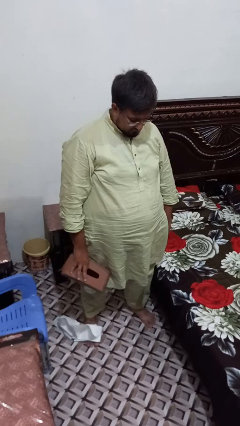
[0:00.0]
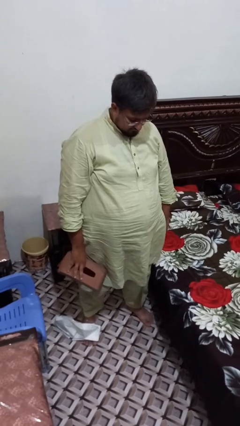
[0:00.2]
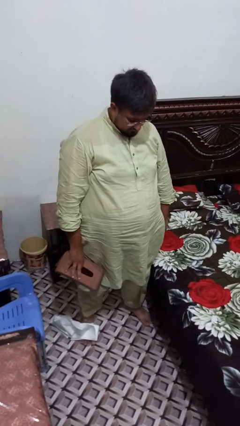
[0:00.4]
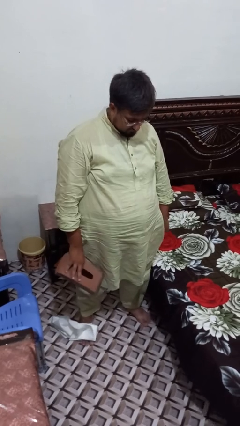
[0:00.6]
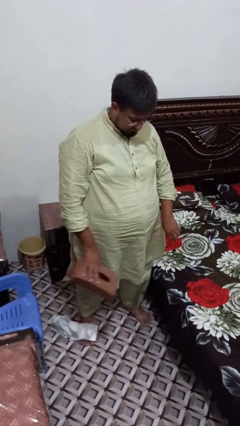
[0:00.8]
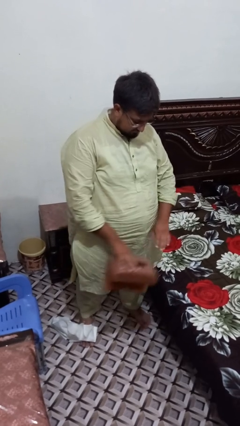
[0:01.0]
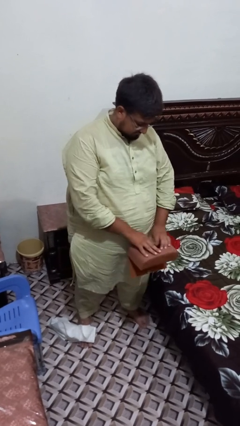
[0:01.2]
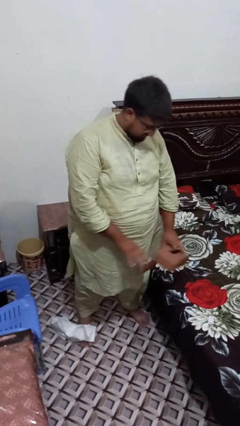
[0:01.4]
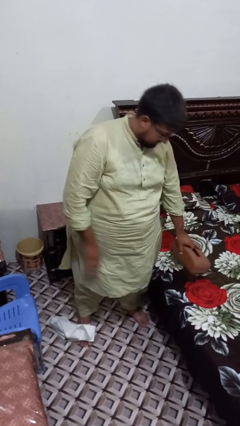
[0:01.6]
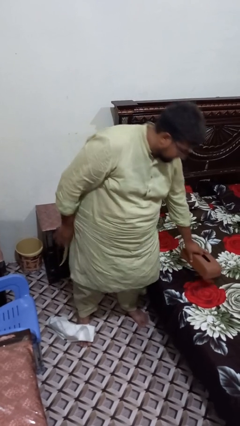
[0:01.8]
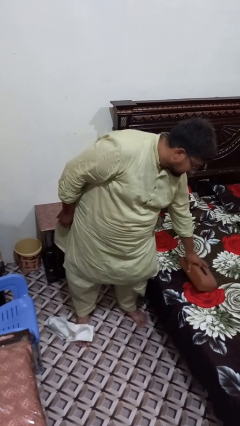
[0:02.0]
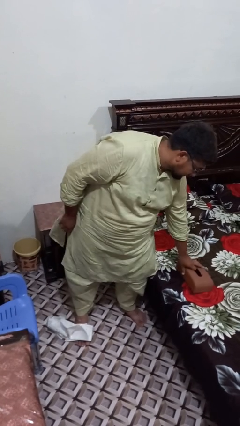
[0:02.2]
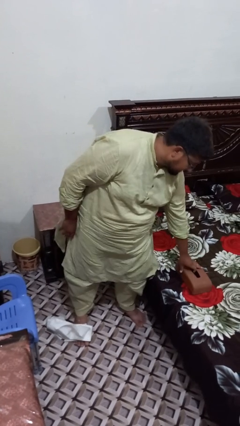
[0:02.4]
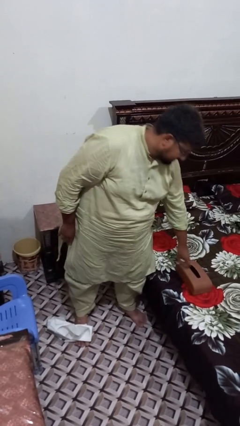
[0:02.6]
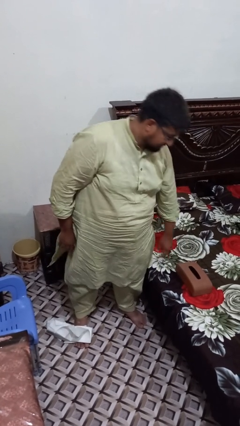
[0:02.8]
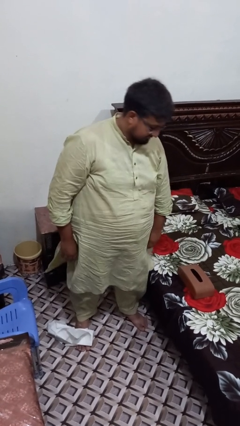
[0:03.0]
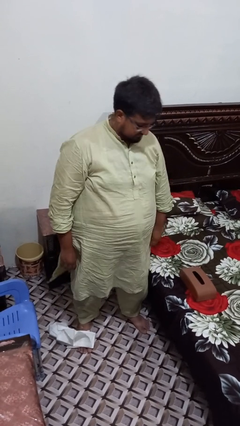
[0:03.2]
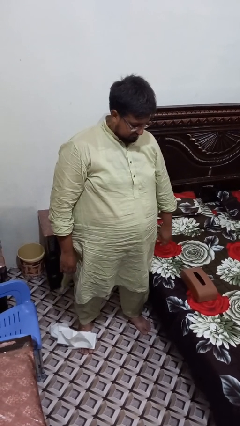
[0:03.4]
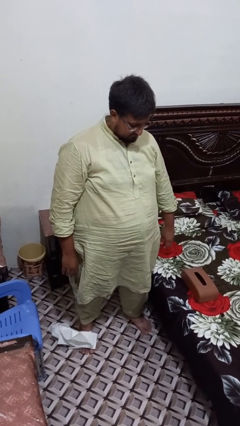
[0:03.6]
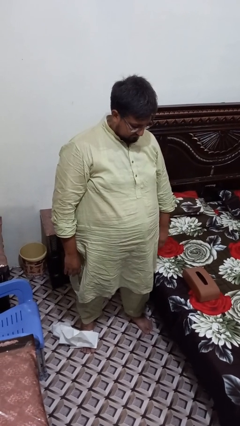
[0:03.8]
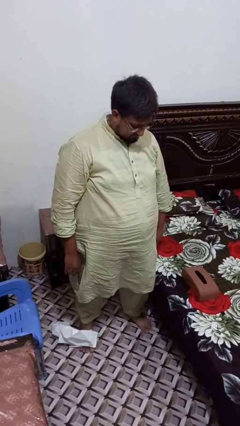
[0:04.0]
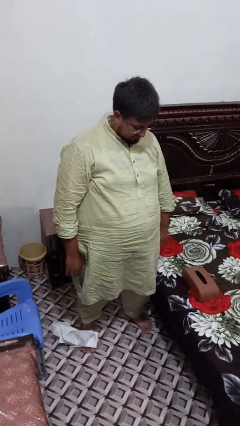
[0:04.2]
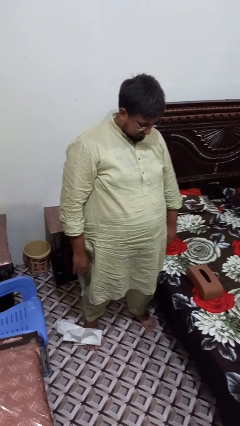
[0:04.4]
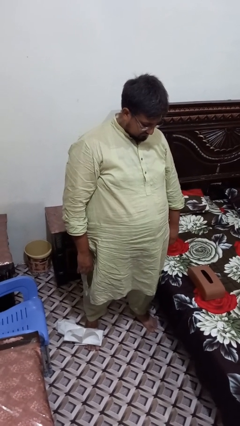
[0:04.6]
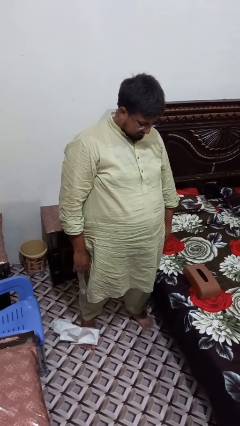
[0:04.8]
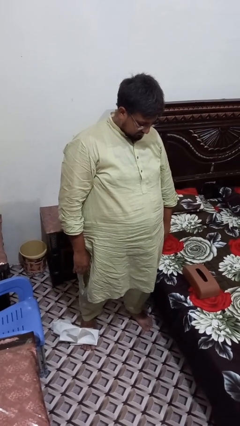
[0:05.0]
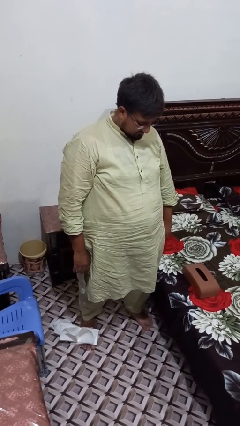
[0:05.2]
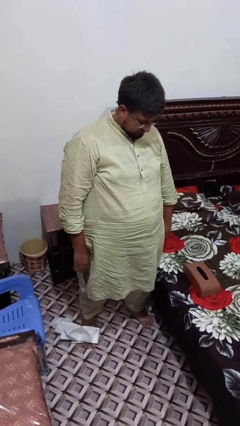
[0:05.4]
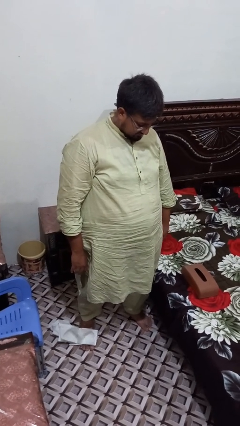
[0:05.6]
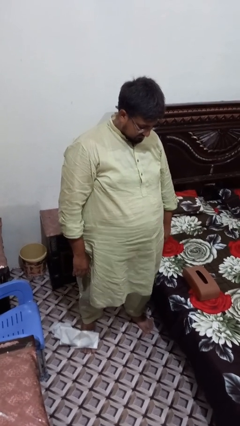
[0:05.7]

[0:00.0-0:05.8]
person puts down object on bed

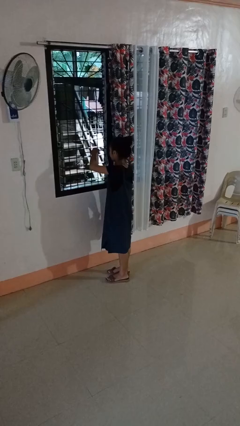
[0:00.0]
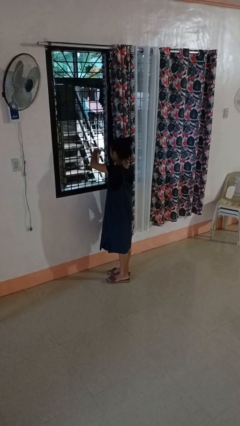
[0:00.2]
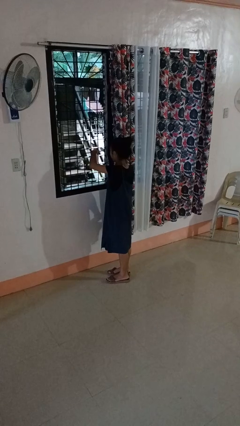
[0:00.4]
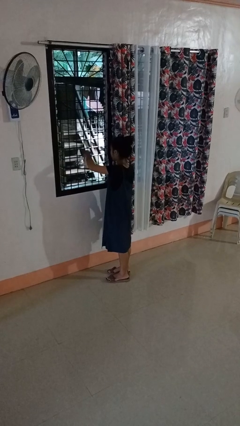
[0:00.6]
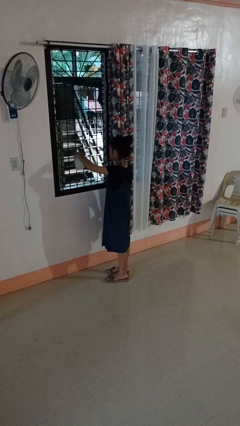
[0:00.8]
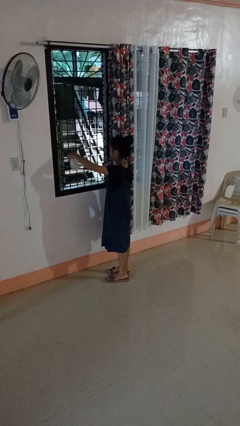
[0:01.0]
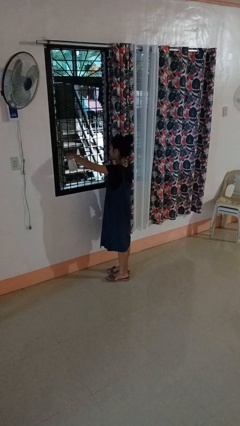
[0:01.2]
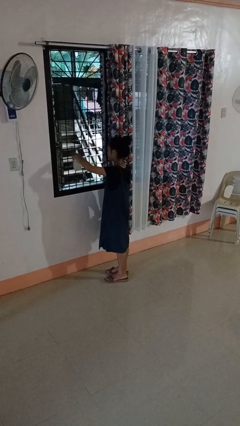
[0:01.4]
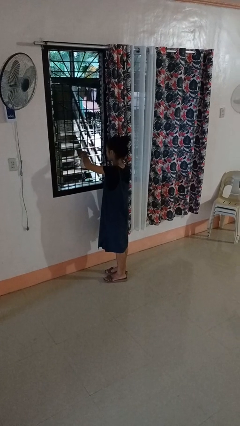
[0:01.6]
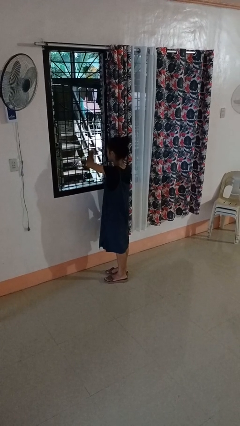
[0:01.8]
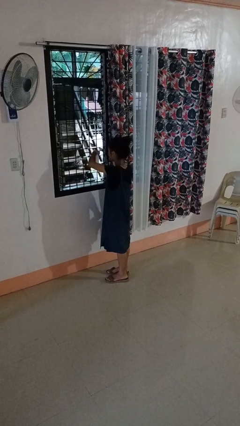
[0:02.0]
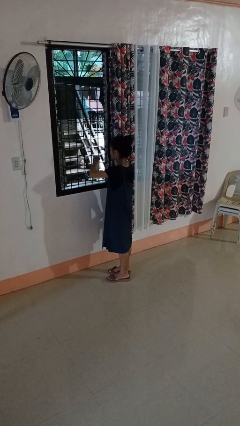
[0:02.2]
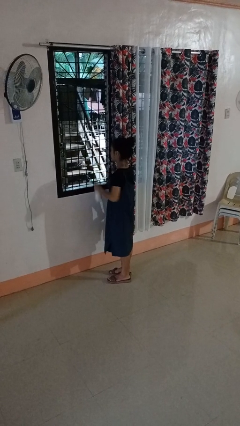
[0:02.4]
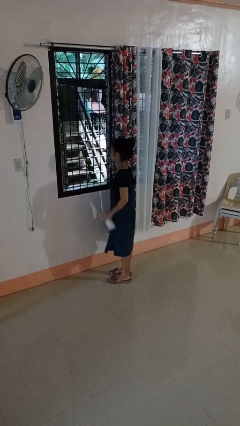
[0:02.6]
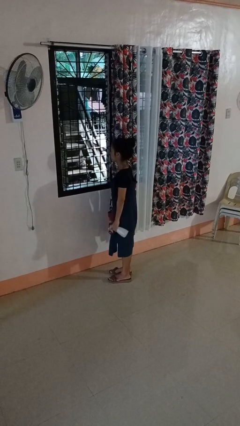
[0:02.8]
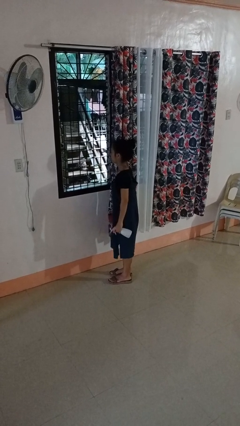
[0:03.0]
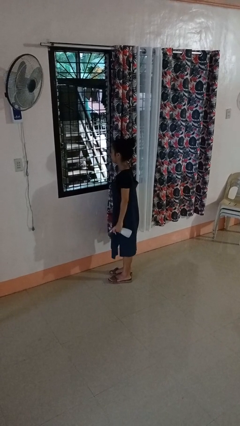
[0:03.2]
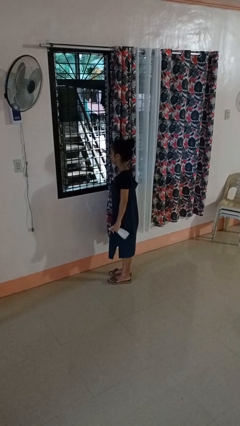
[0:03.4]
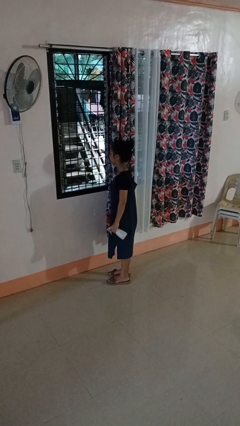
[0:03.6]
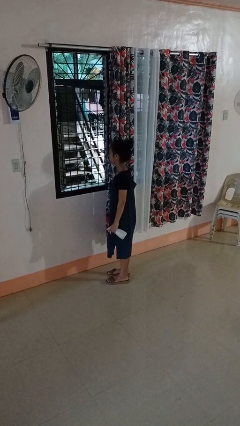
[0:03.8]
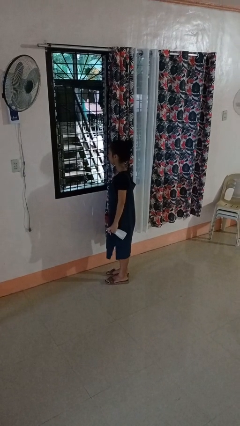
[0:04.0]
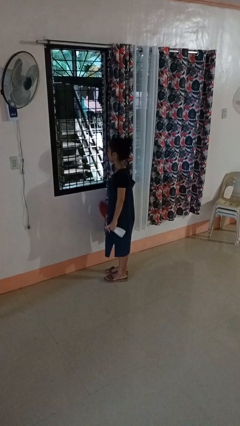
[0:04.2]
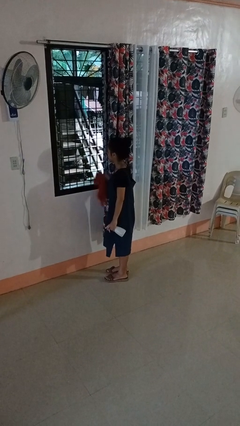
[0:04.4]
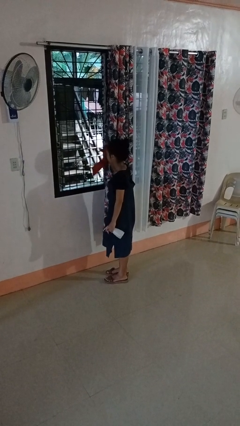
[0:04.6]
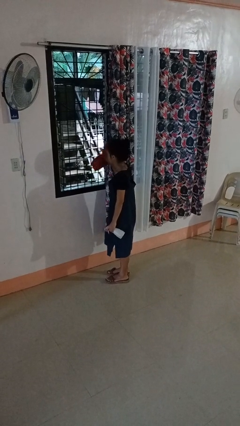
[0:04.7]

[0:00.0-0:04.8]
person sprays from bottle

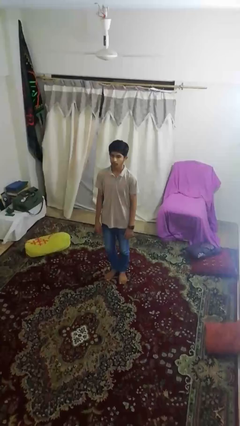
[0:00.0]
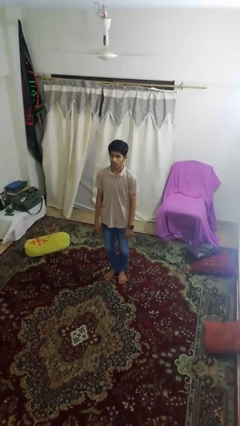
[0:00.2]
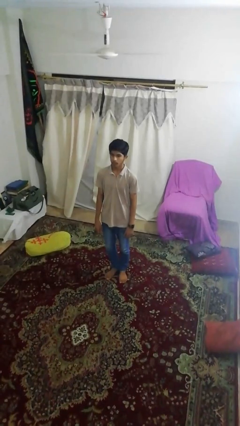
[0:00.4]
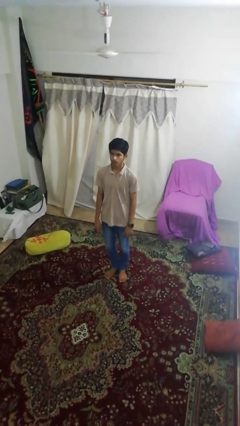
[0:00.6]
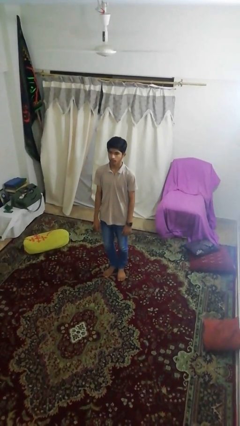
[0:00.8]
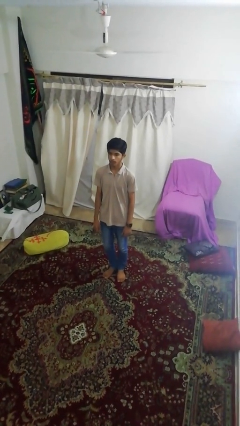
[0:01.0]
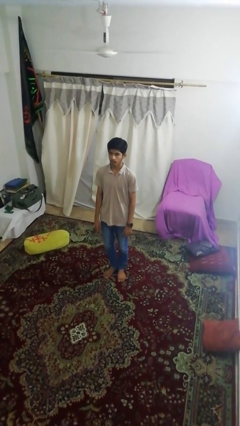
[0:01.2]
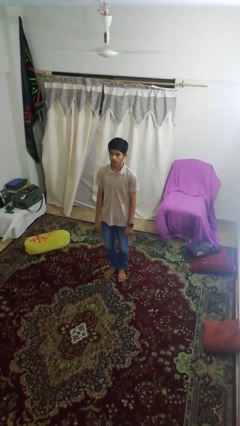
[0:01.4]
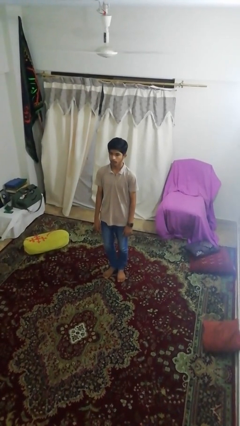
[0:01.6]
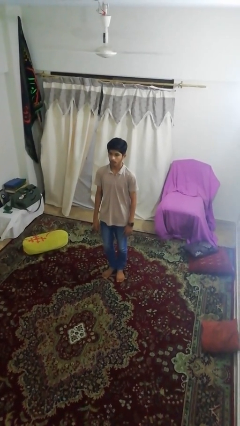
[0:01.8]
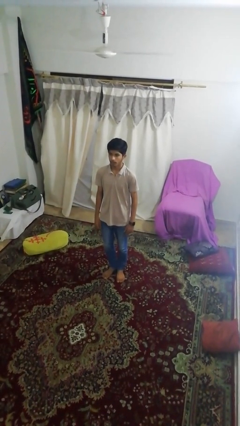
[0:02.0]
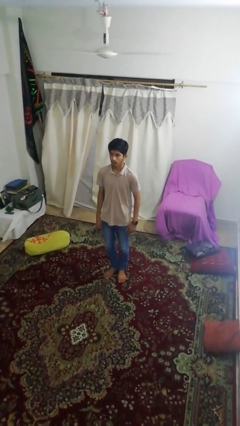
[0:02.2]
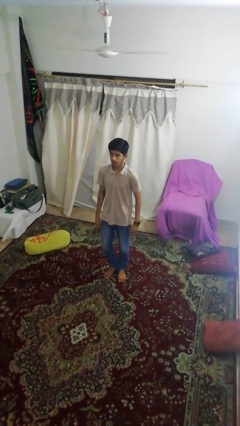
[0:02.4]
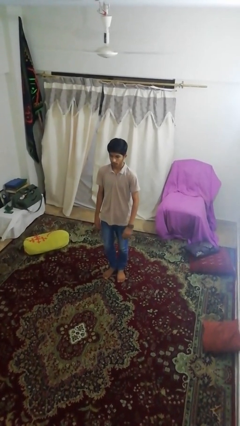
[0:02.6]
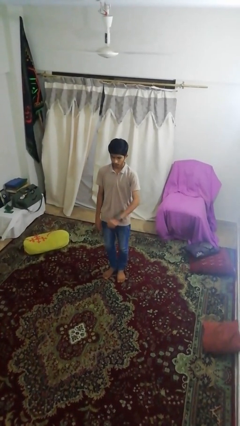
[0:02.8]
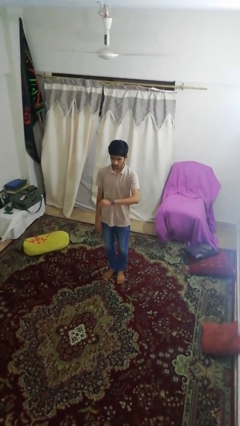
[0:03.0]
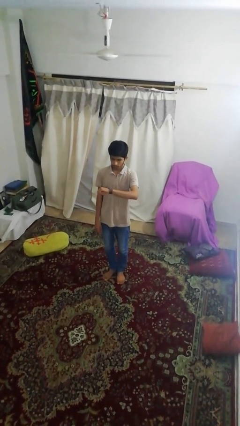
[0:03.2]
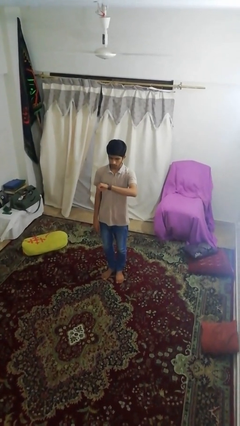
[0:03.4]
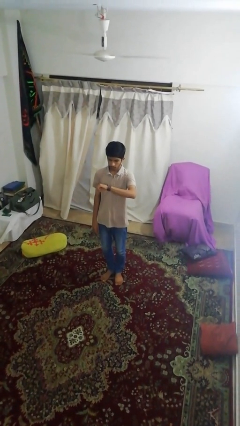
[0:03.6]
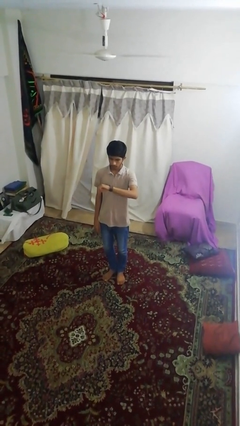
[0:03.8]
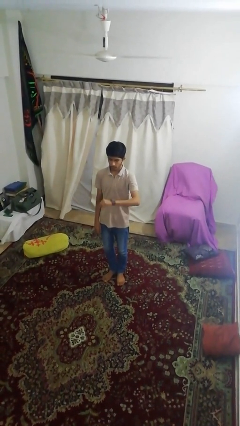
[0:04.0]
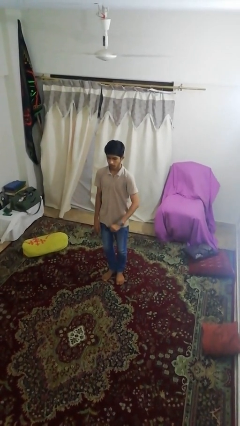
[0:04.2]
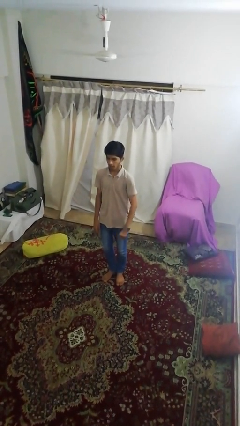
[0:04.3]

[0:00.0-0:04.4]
person looks at wristwatch

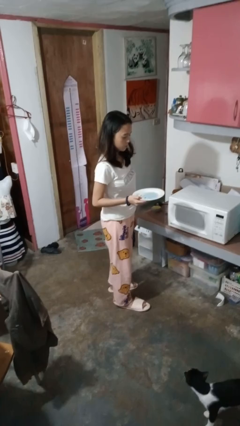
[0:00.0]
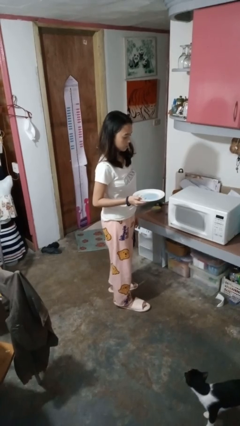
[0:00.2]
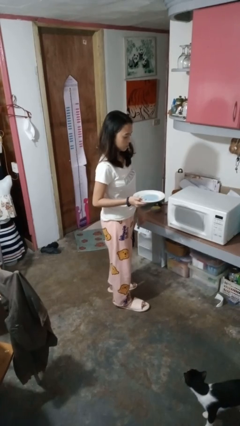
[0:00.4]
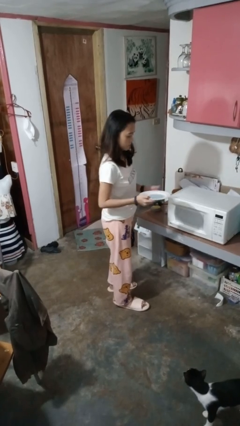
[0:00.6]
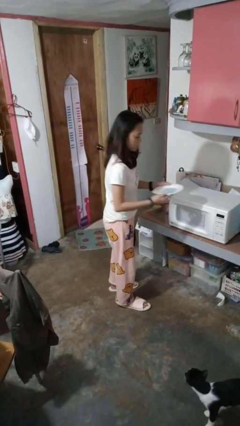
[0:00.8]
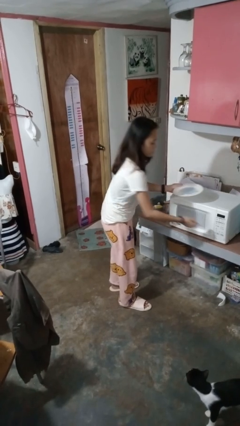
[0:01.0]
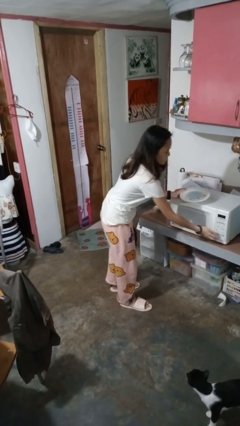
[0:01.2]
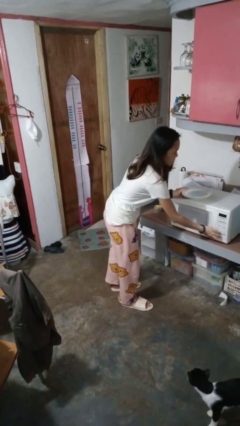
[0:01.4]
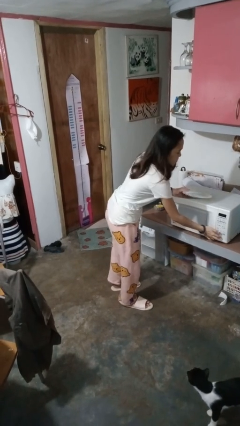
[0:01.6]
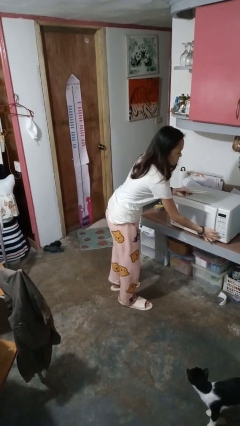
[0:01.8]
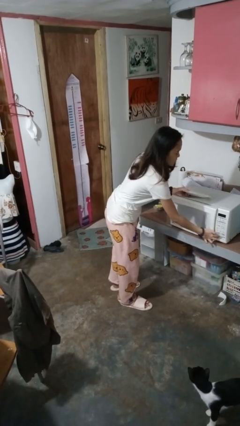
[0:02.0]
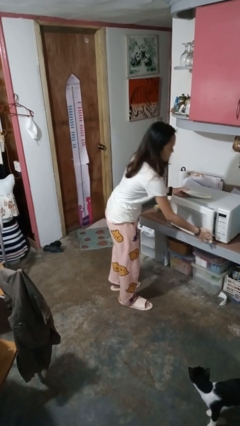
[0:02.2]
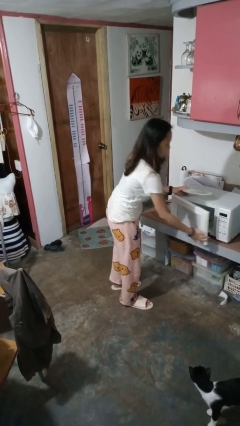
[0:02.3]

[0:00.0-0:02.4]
person opens microwave
